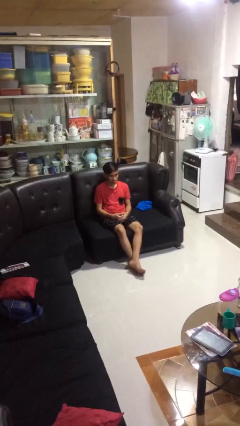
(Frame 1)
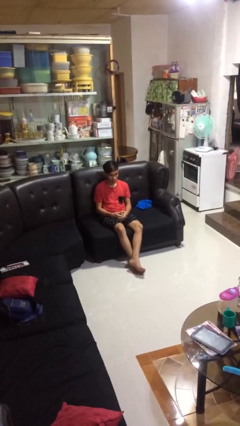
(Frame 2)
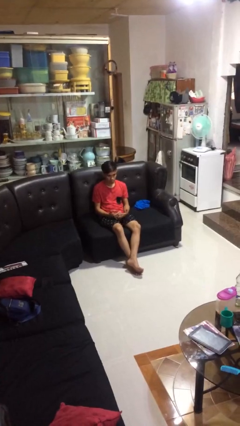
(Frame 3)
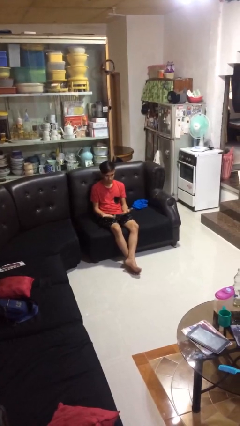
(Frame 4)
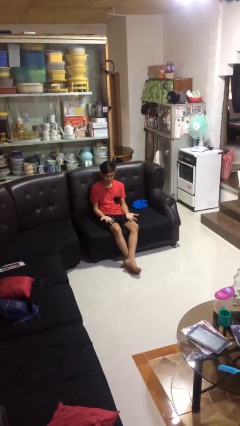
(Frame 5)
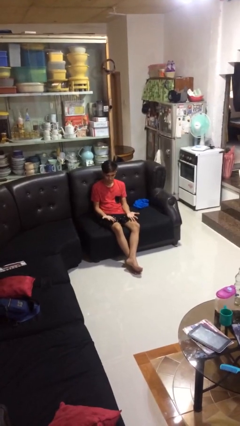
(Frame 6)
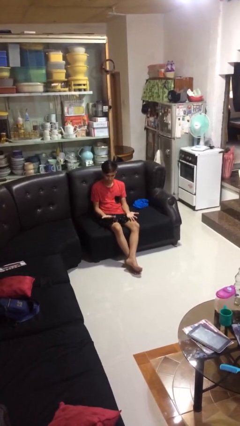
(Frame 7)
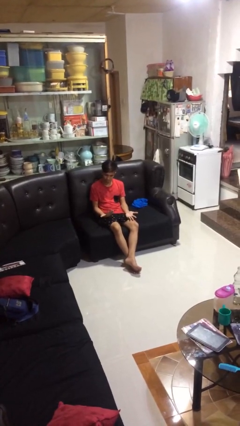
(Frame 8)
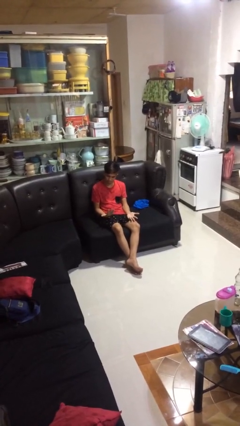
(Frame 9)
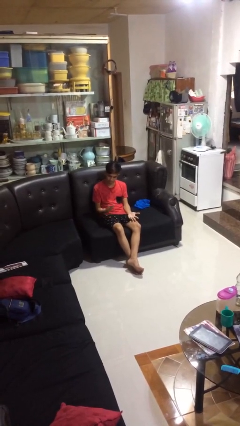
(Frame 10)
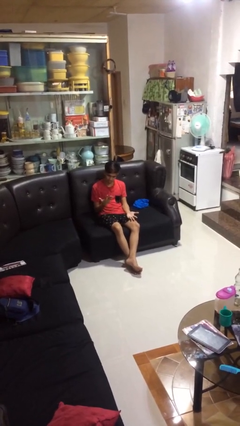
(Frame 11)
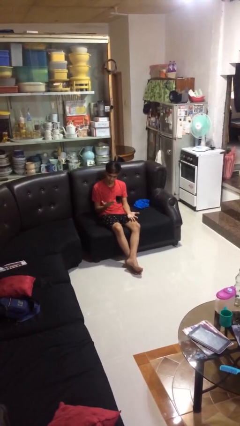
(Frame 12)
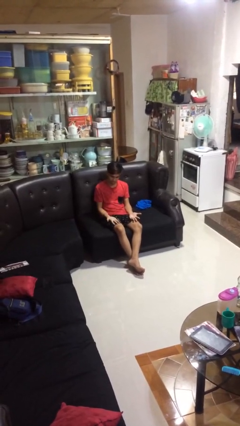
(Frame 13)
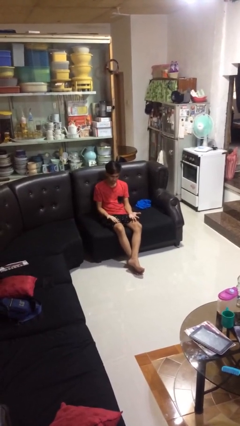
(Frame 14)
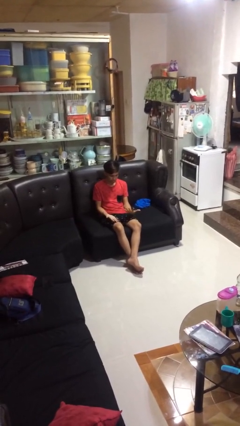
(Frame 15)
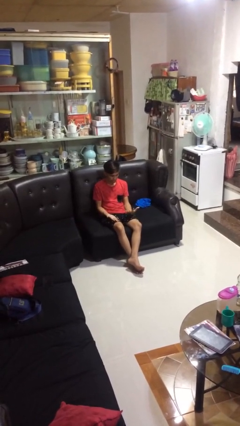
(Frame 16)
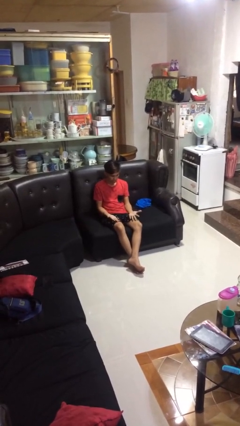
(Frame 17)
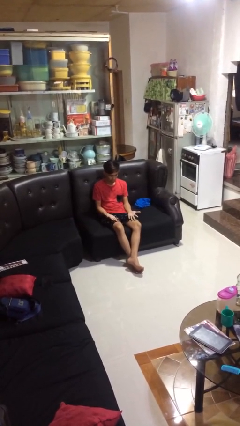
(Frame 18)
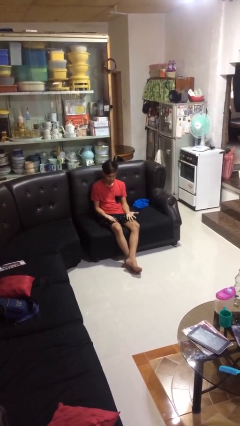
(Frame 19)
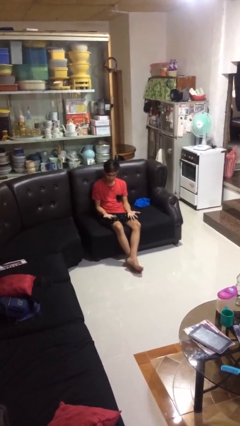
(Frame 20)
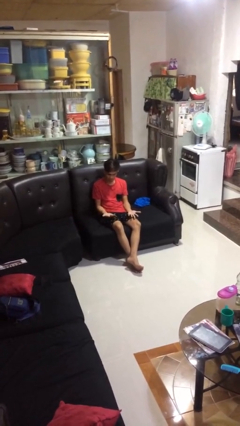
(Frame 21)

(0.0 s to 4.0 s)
person looks at hands in lap

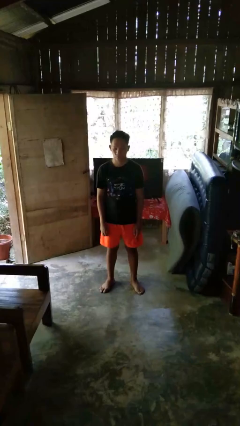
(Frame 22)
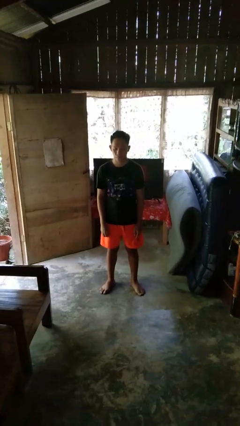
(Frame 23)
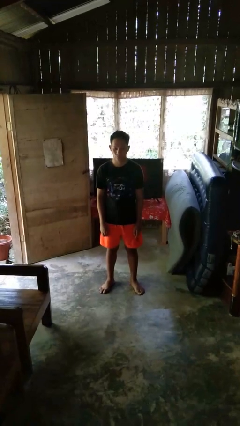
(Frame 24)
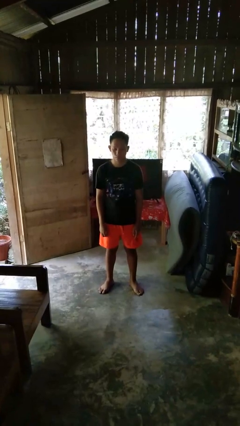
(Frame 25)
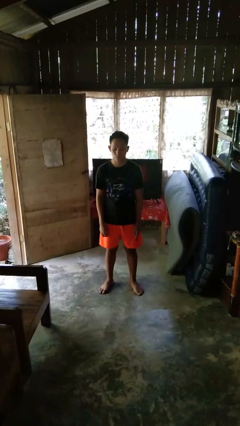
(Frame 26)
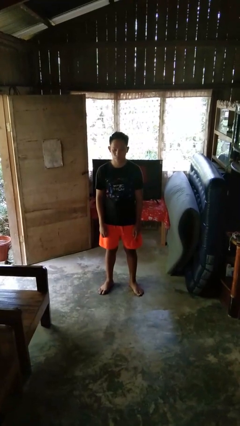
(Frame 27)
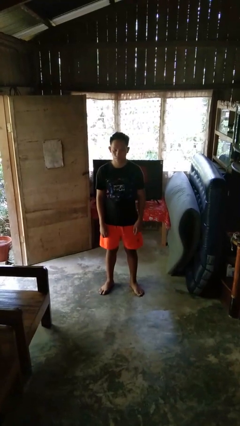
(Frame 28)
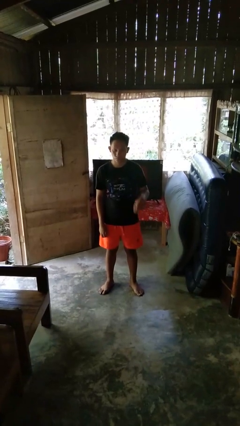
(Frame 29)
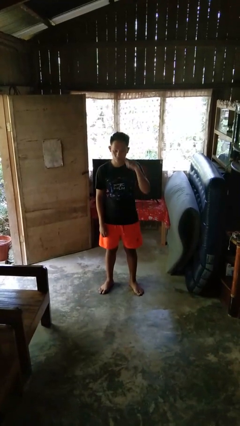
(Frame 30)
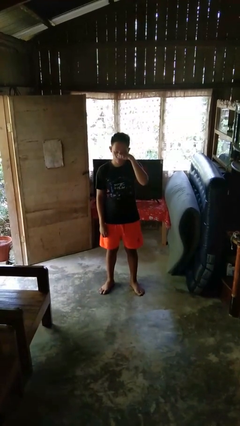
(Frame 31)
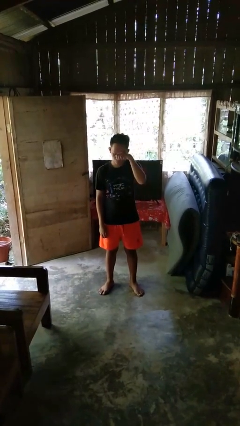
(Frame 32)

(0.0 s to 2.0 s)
person rubs eyes

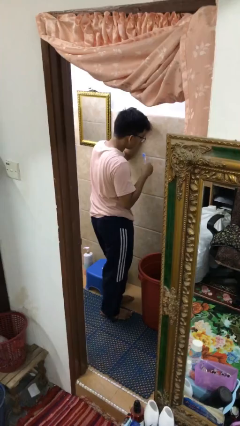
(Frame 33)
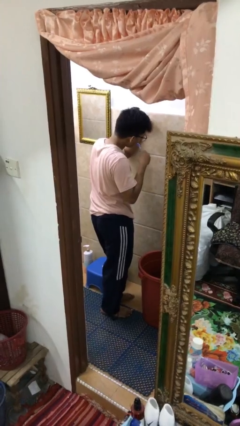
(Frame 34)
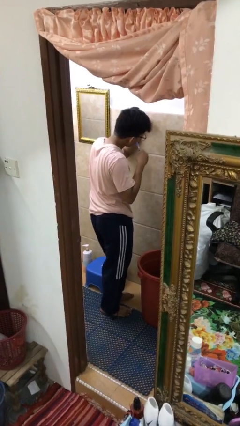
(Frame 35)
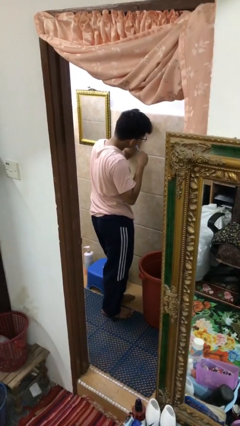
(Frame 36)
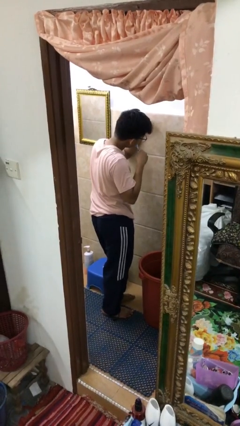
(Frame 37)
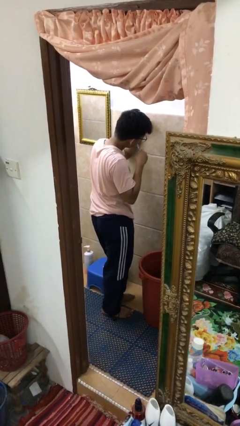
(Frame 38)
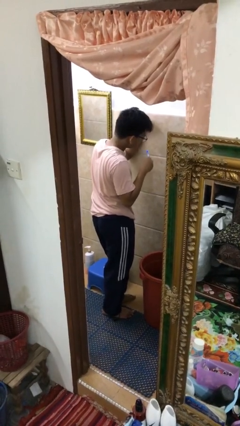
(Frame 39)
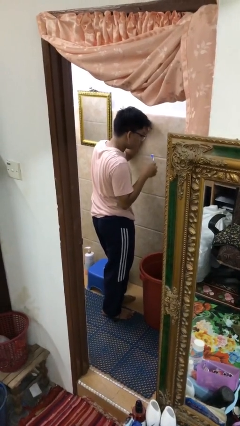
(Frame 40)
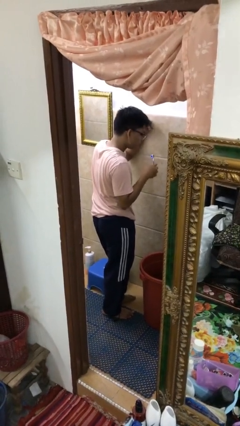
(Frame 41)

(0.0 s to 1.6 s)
person brushes teeth

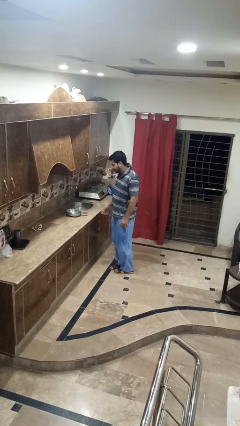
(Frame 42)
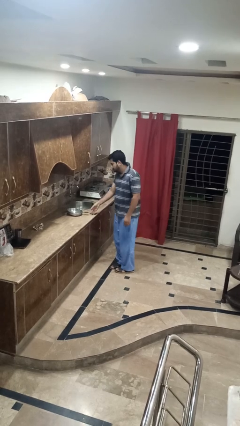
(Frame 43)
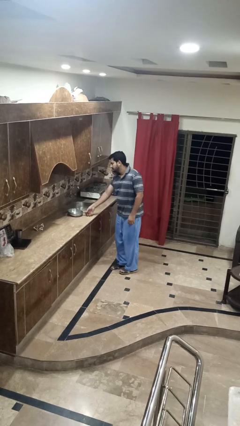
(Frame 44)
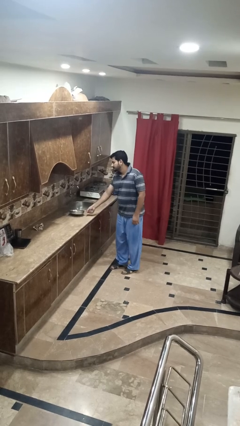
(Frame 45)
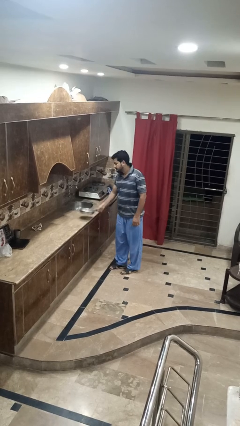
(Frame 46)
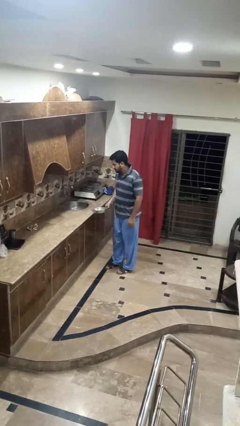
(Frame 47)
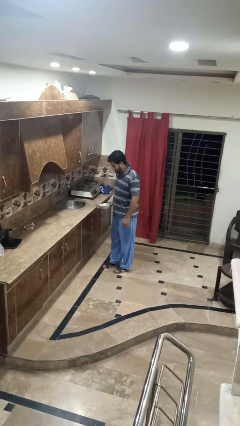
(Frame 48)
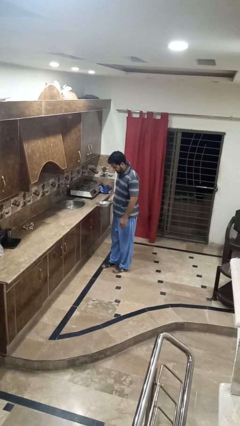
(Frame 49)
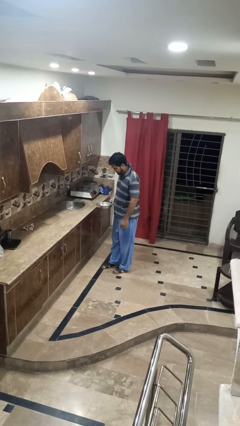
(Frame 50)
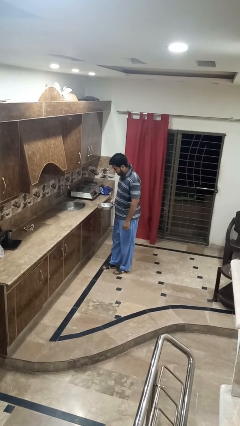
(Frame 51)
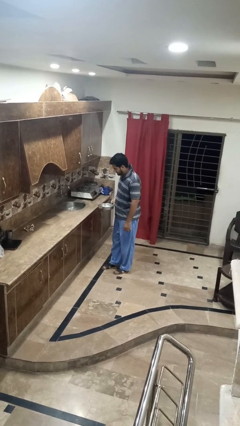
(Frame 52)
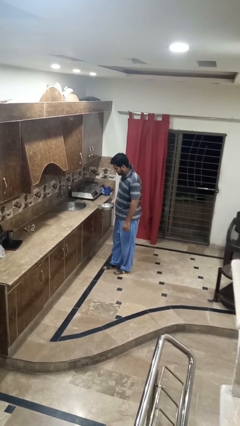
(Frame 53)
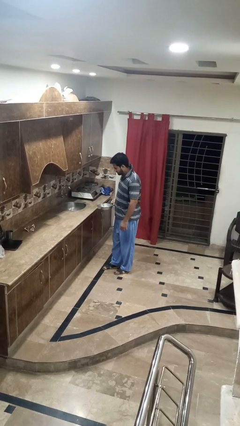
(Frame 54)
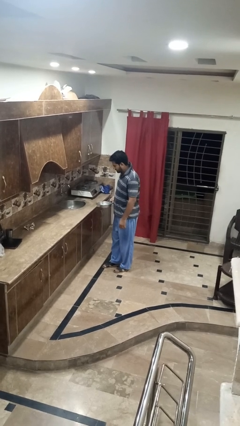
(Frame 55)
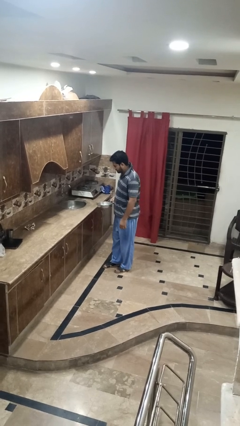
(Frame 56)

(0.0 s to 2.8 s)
person picks up object from countertop

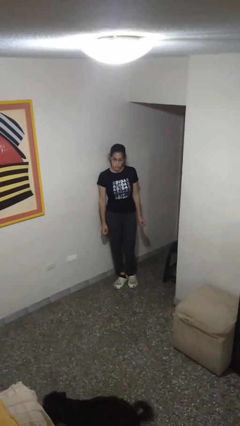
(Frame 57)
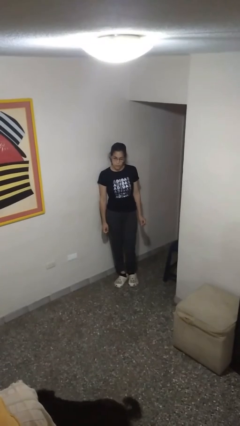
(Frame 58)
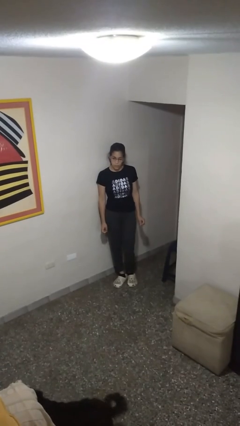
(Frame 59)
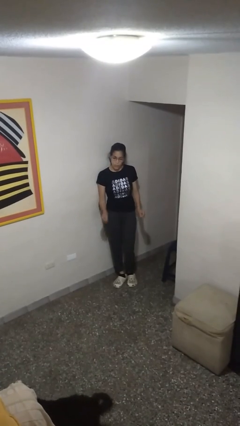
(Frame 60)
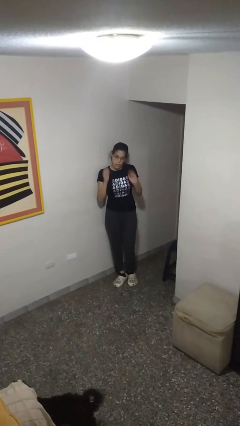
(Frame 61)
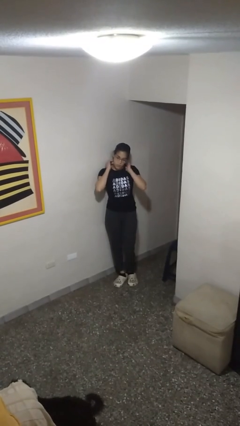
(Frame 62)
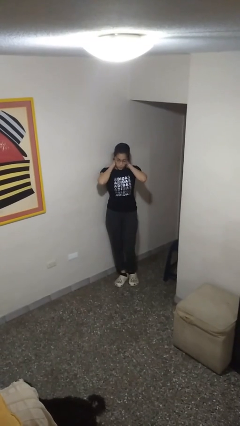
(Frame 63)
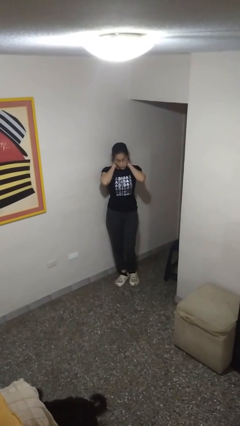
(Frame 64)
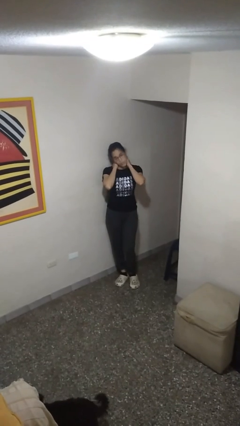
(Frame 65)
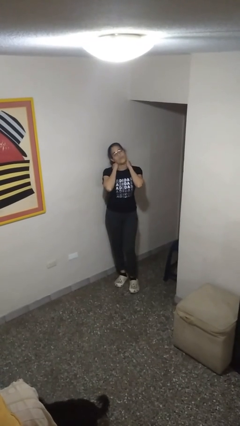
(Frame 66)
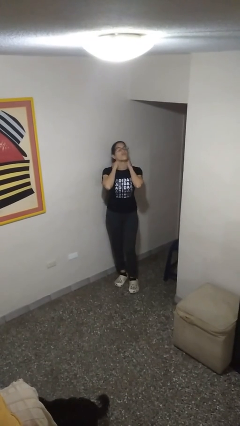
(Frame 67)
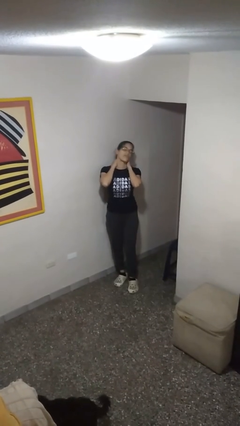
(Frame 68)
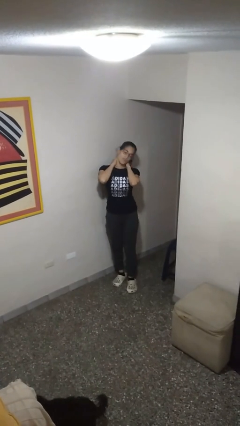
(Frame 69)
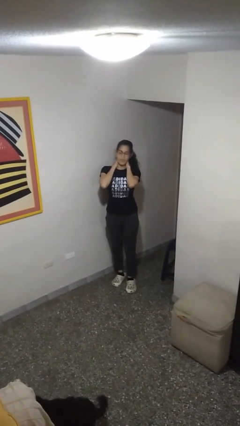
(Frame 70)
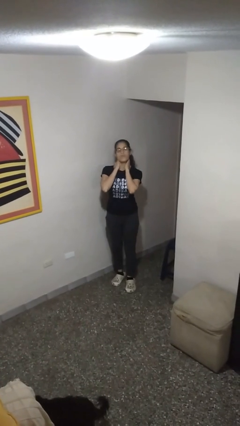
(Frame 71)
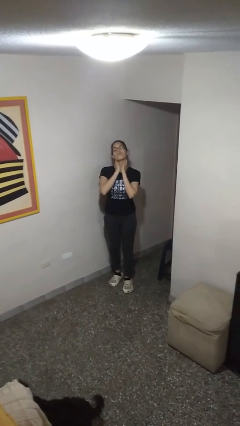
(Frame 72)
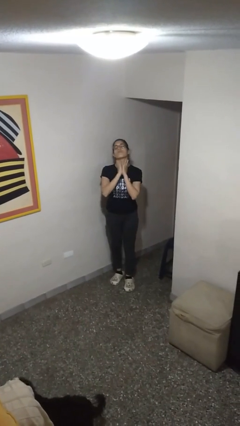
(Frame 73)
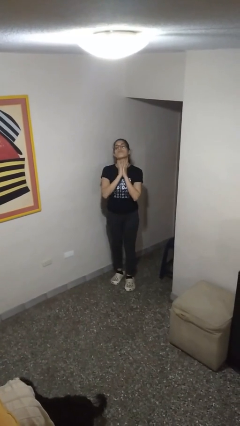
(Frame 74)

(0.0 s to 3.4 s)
person rubs neck

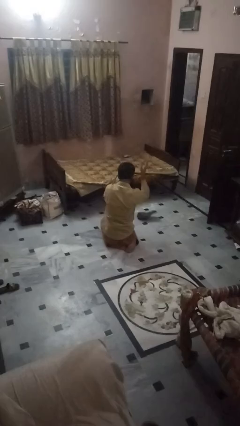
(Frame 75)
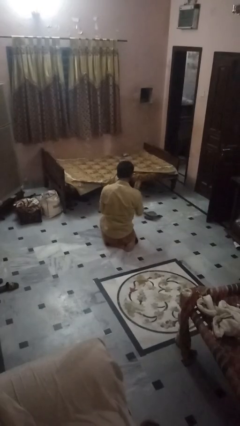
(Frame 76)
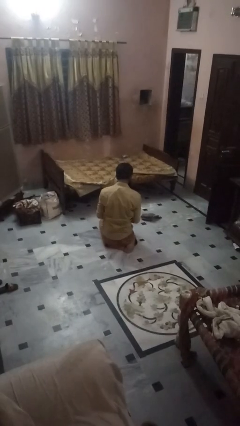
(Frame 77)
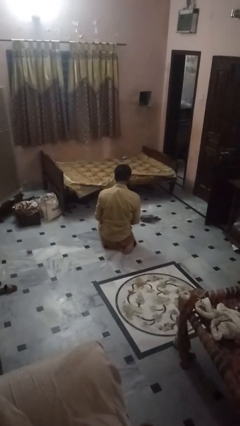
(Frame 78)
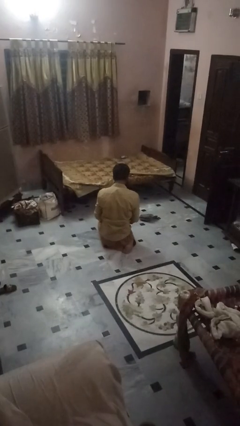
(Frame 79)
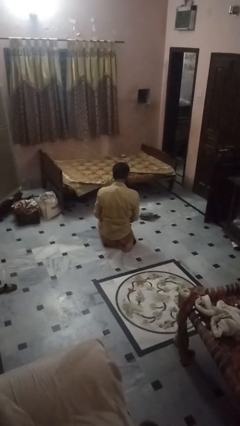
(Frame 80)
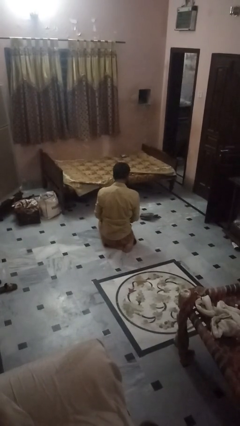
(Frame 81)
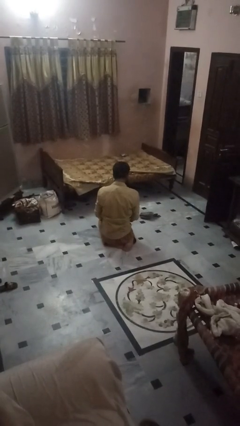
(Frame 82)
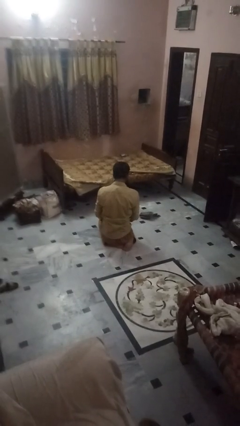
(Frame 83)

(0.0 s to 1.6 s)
person catches dropped object

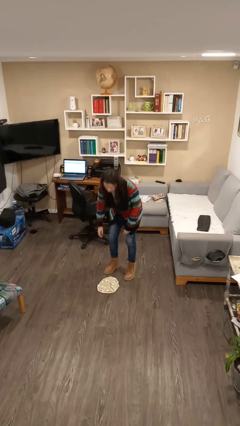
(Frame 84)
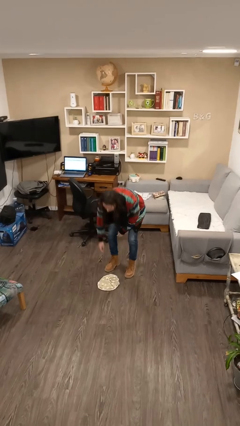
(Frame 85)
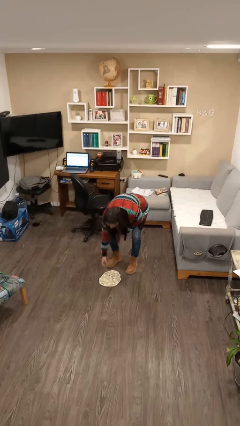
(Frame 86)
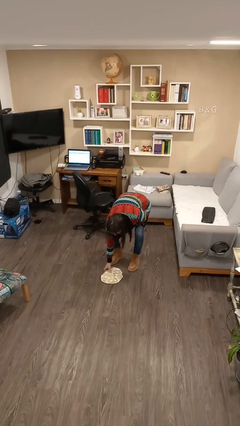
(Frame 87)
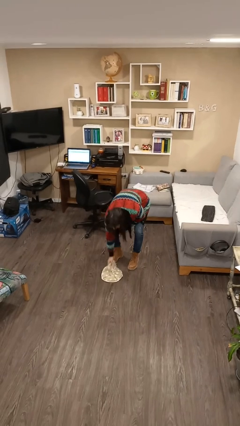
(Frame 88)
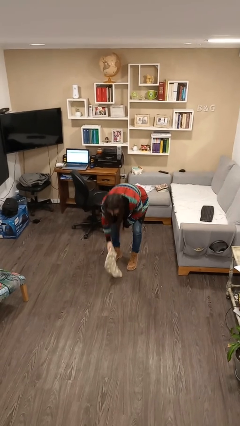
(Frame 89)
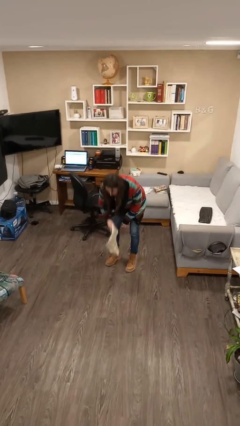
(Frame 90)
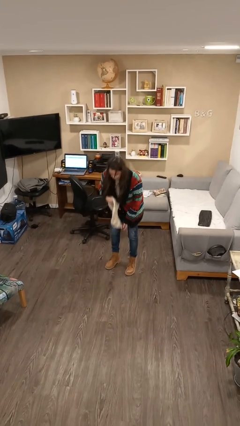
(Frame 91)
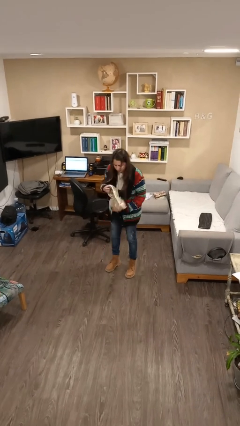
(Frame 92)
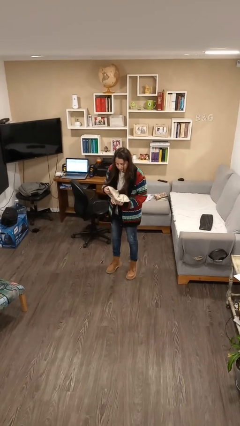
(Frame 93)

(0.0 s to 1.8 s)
person picks up object from floor
